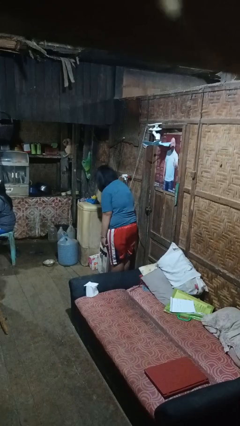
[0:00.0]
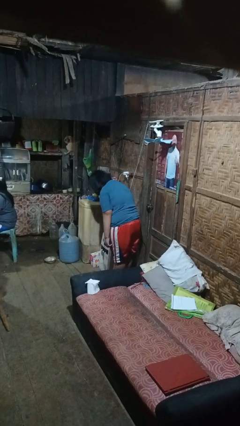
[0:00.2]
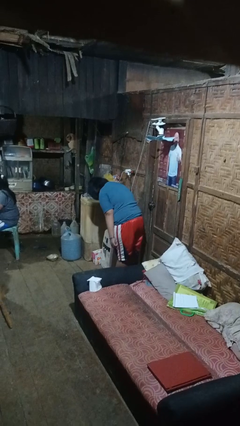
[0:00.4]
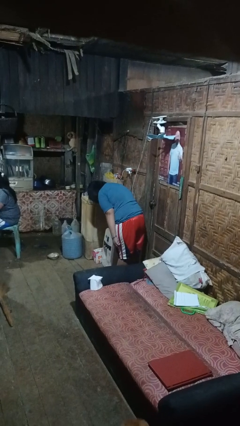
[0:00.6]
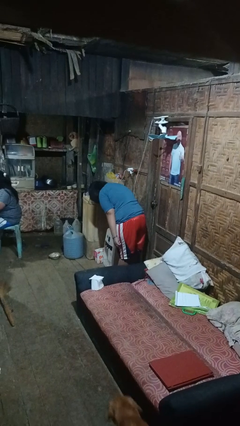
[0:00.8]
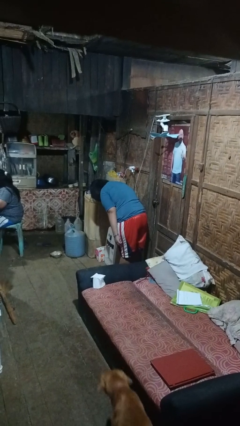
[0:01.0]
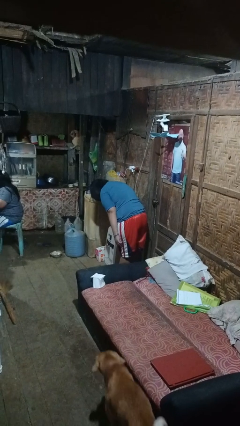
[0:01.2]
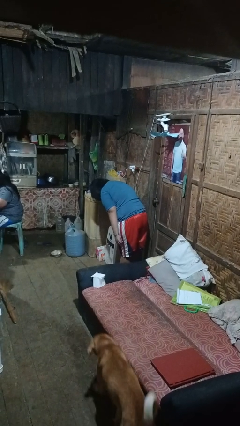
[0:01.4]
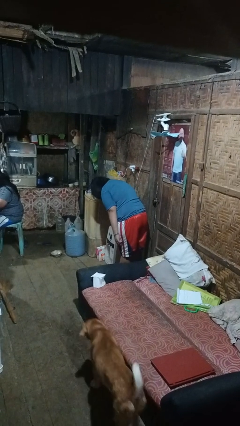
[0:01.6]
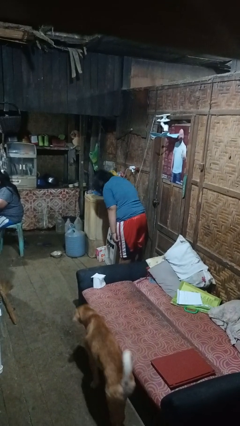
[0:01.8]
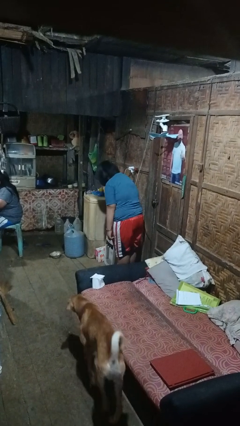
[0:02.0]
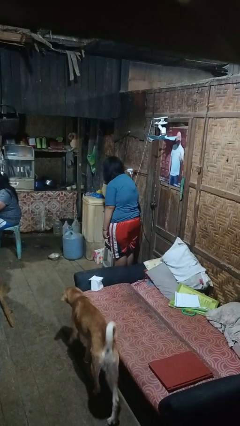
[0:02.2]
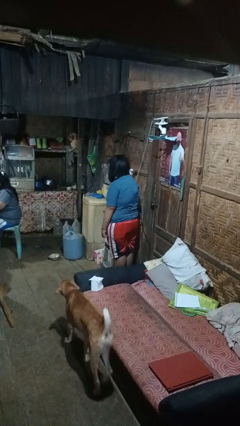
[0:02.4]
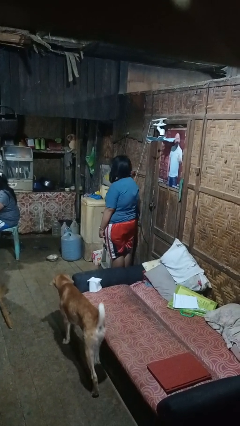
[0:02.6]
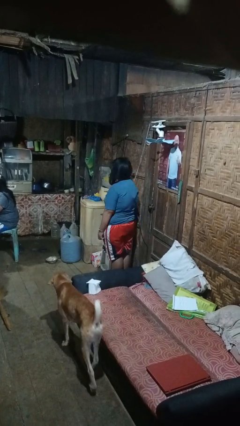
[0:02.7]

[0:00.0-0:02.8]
person bows

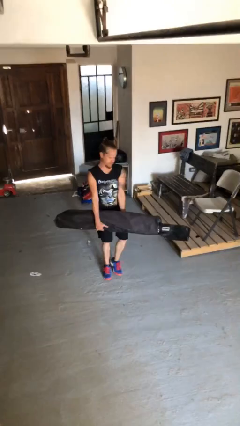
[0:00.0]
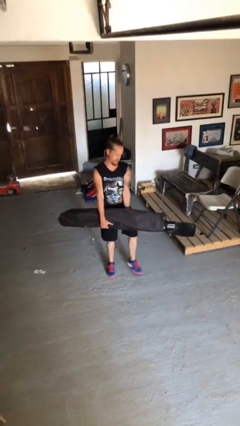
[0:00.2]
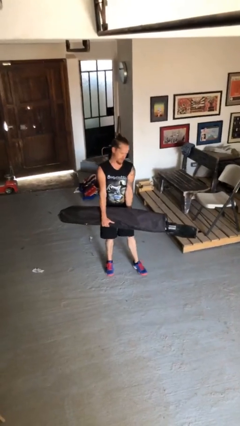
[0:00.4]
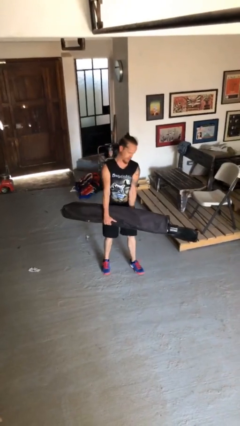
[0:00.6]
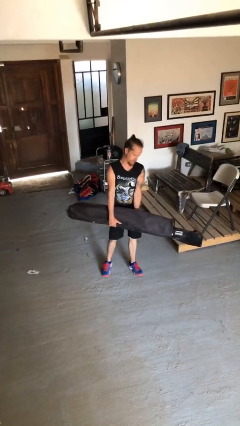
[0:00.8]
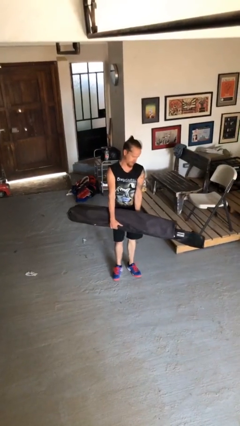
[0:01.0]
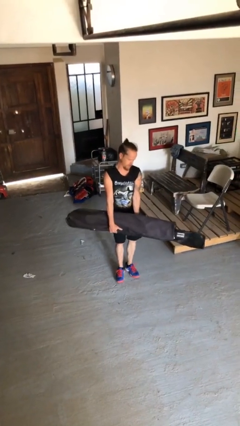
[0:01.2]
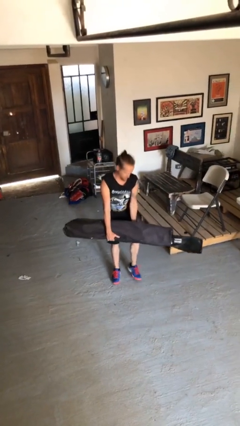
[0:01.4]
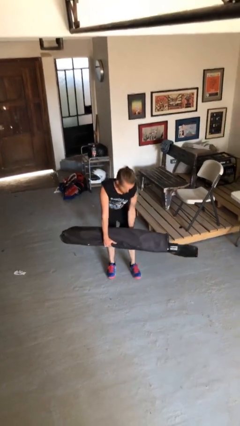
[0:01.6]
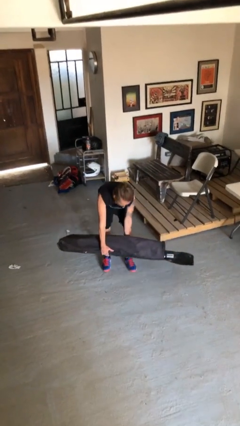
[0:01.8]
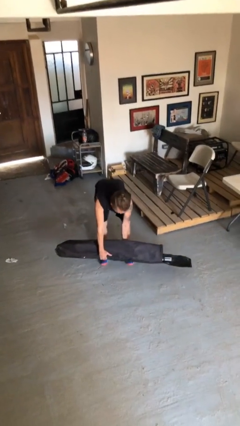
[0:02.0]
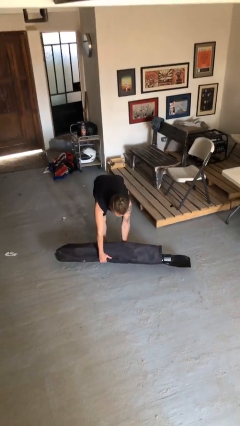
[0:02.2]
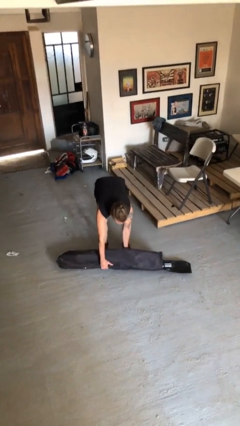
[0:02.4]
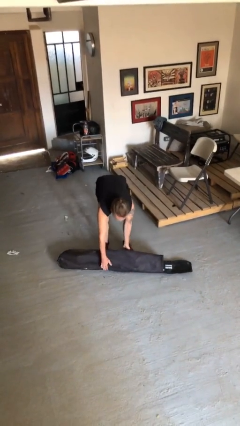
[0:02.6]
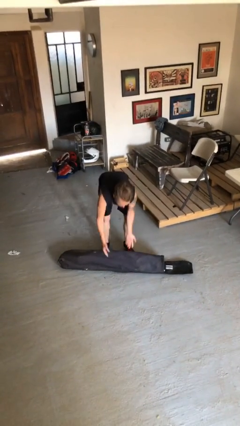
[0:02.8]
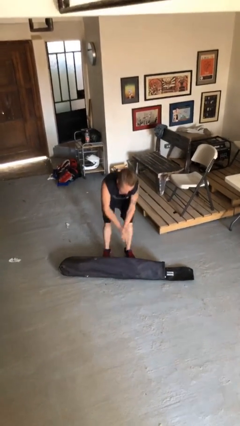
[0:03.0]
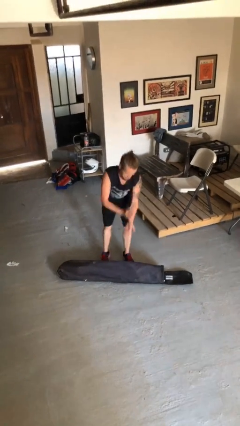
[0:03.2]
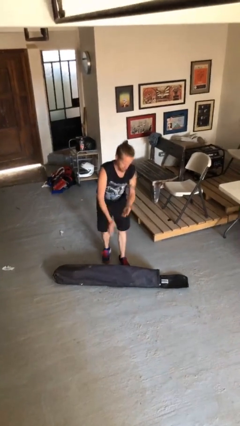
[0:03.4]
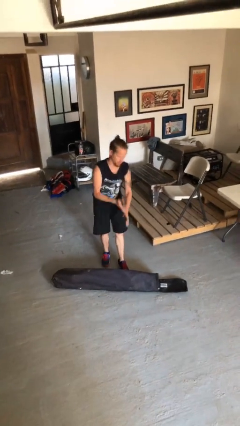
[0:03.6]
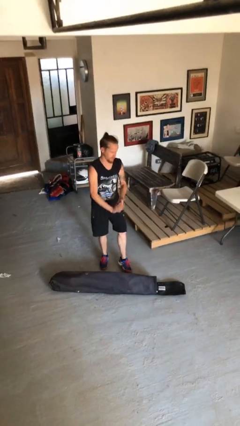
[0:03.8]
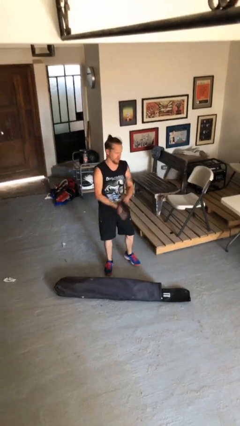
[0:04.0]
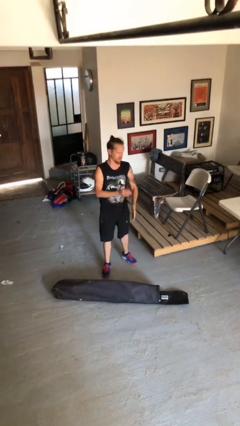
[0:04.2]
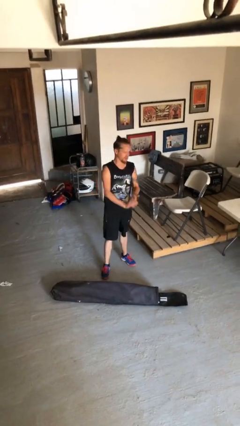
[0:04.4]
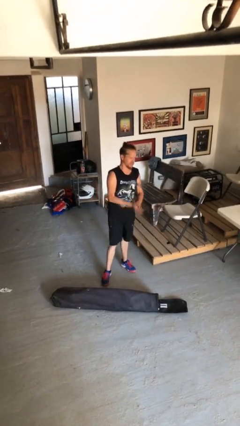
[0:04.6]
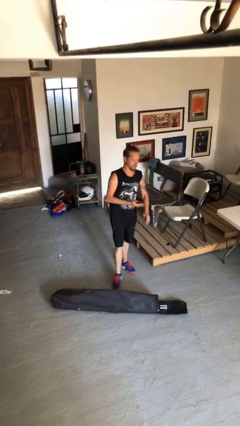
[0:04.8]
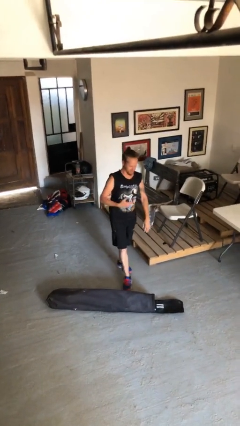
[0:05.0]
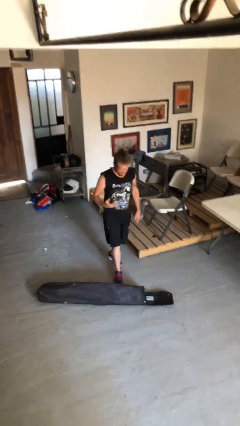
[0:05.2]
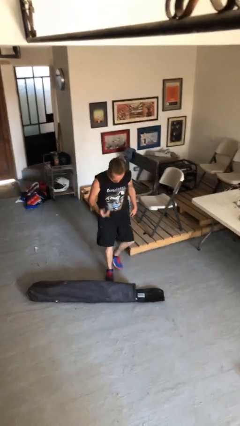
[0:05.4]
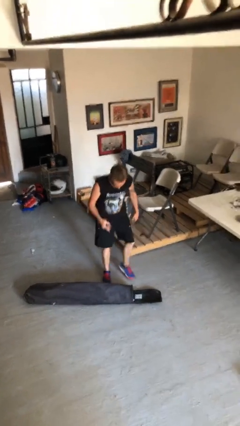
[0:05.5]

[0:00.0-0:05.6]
person puts down object on floor

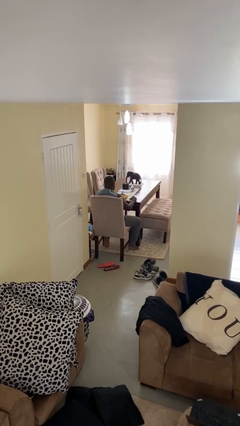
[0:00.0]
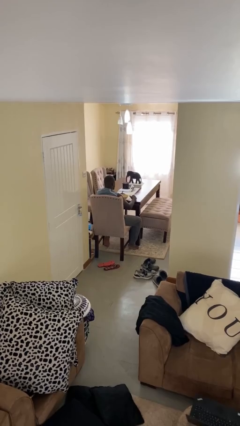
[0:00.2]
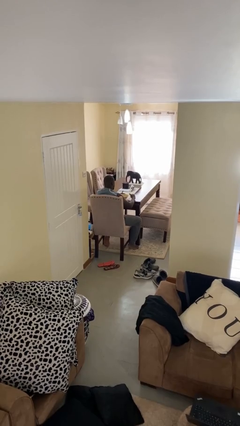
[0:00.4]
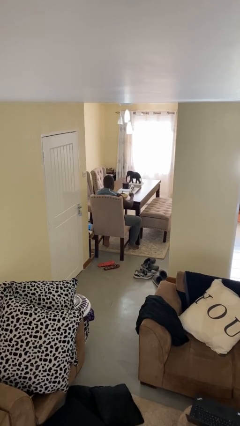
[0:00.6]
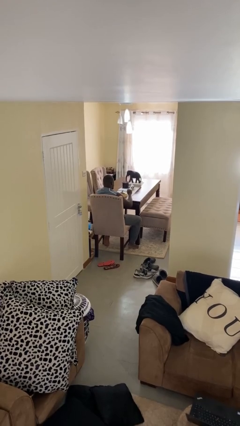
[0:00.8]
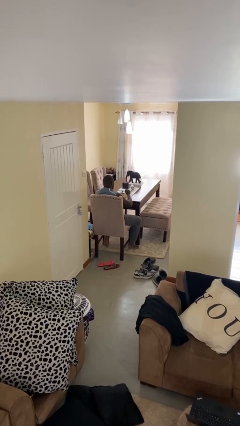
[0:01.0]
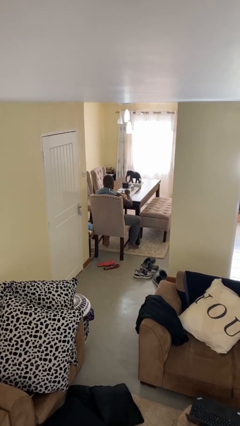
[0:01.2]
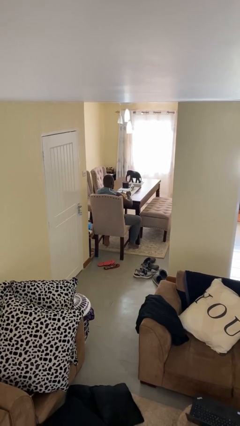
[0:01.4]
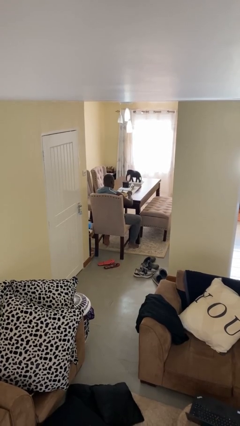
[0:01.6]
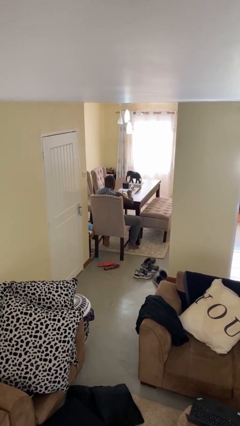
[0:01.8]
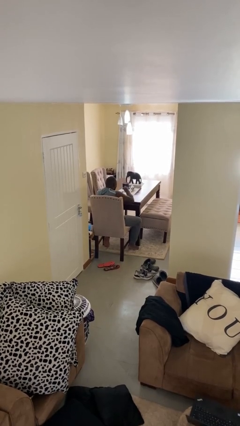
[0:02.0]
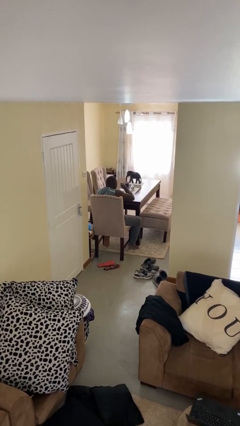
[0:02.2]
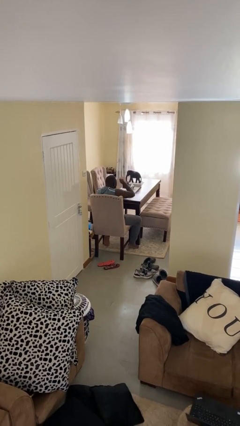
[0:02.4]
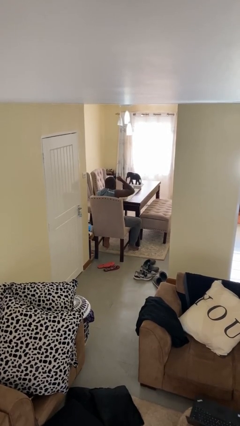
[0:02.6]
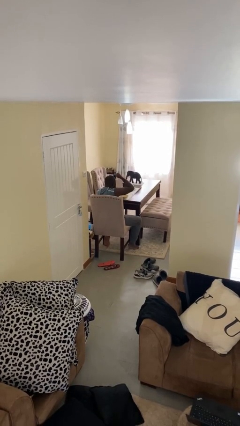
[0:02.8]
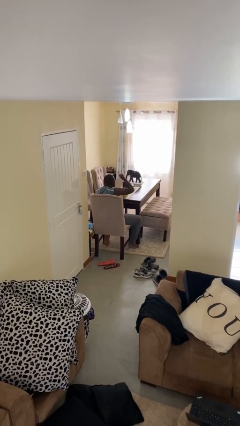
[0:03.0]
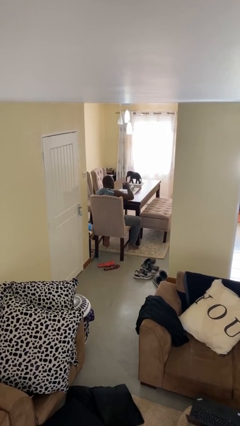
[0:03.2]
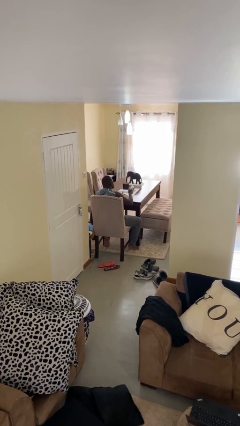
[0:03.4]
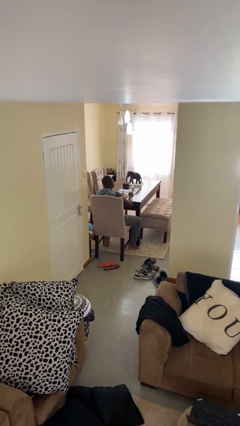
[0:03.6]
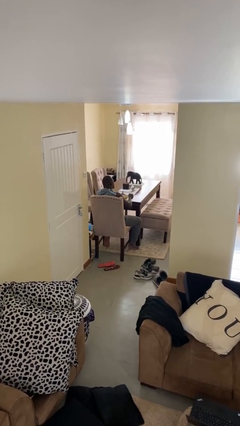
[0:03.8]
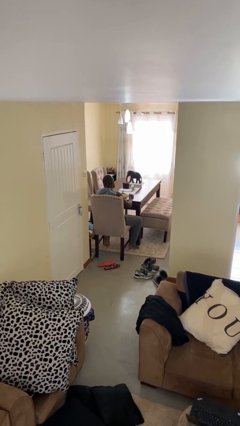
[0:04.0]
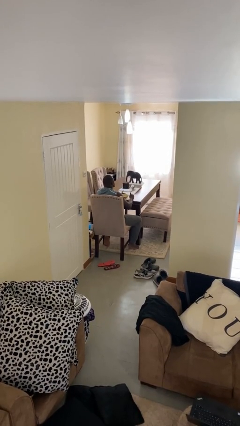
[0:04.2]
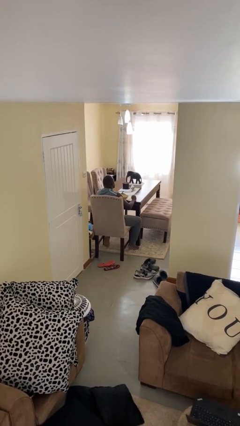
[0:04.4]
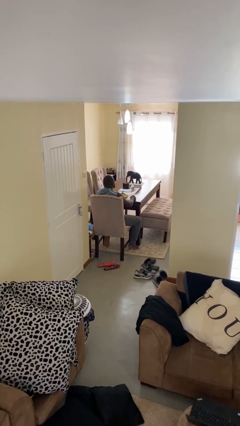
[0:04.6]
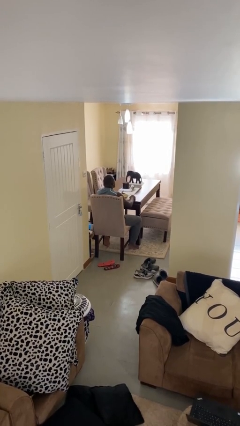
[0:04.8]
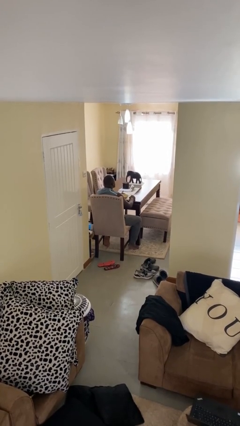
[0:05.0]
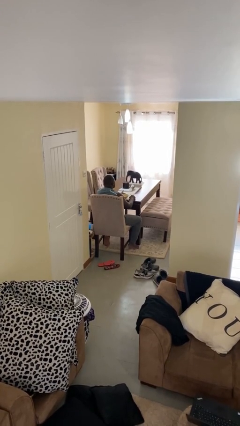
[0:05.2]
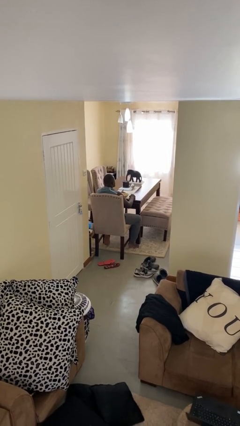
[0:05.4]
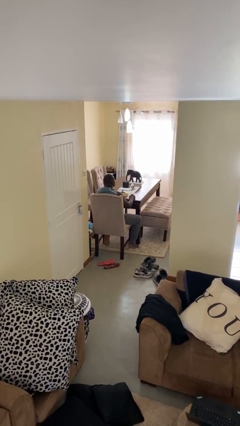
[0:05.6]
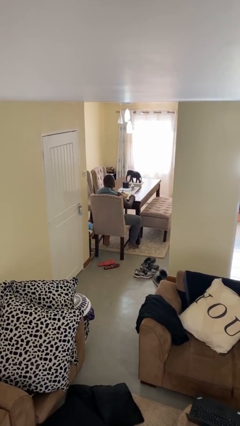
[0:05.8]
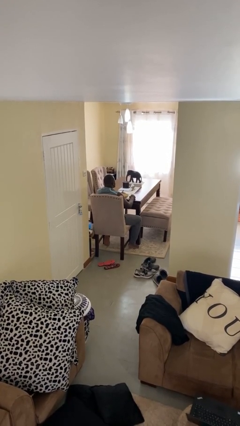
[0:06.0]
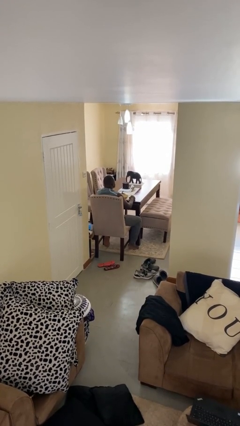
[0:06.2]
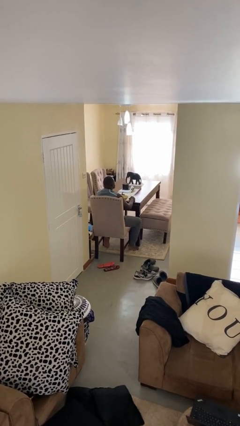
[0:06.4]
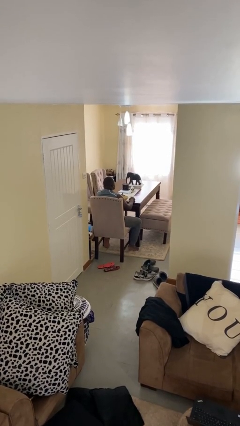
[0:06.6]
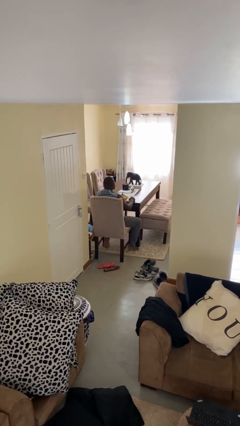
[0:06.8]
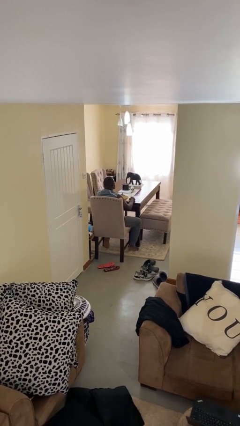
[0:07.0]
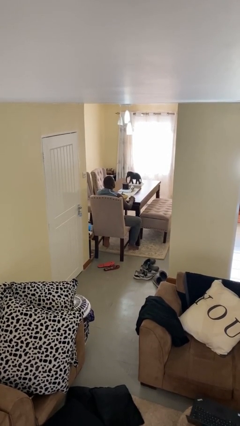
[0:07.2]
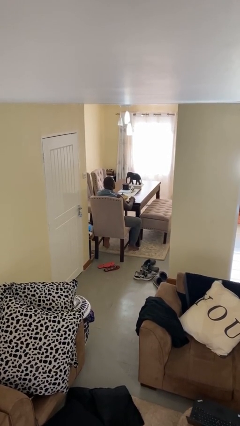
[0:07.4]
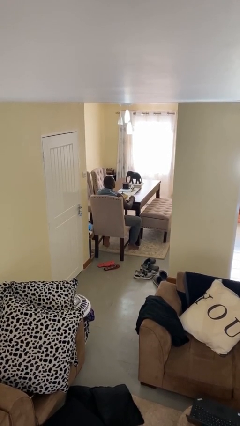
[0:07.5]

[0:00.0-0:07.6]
person eats with utensil

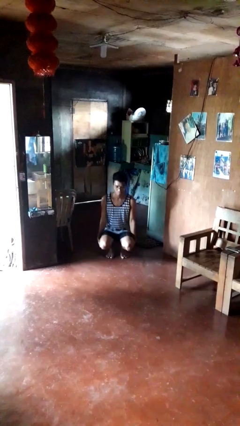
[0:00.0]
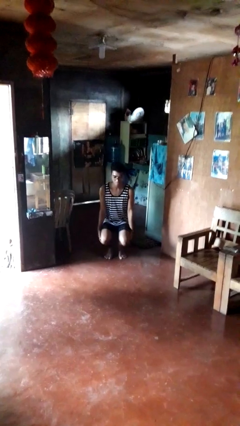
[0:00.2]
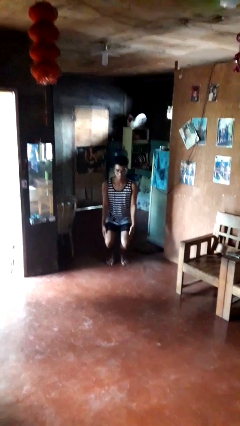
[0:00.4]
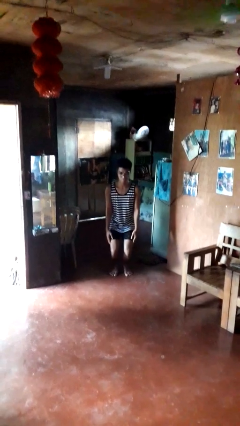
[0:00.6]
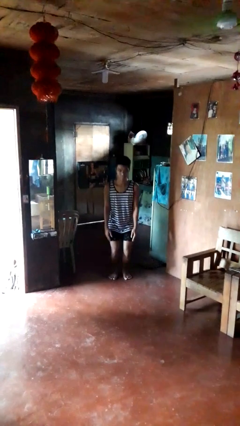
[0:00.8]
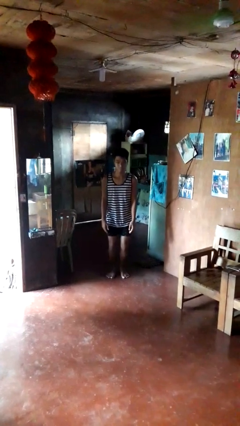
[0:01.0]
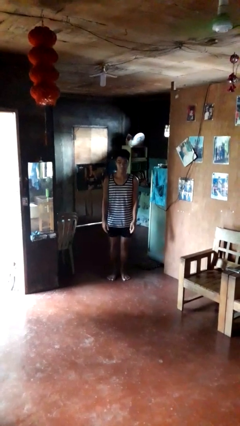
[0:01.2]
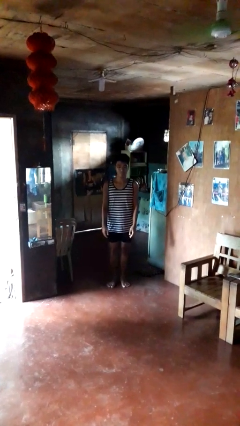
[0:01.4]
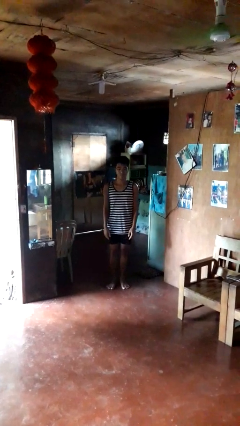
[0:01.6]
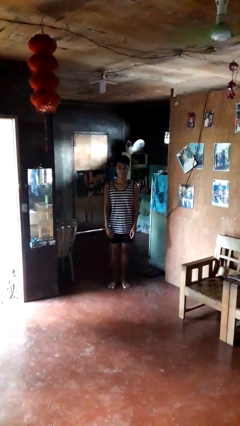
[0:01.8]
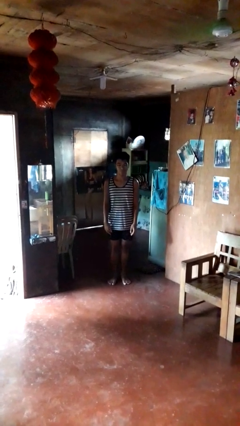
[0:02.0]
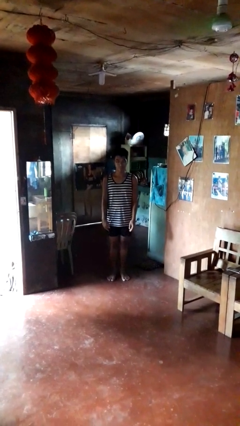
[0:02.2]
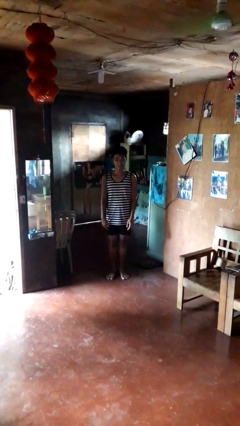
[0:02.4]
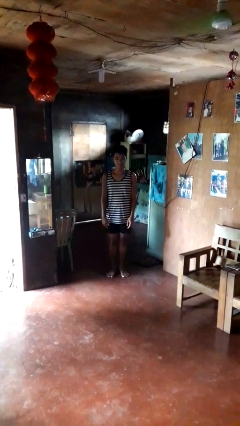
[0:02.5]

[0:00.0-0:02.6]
person stands up
